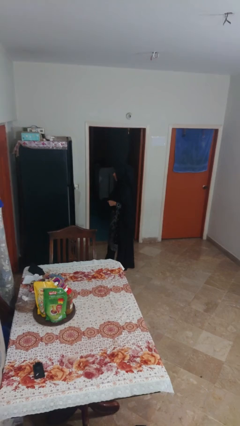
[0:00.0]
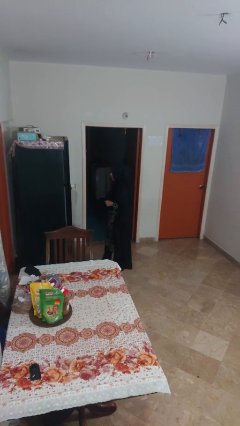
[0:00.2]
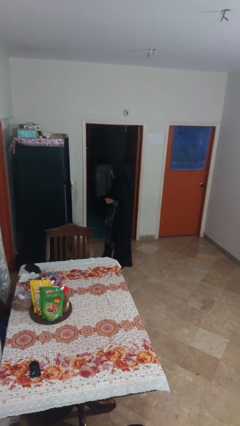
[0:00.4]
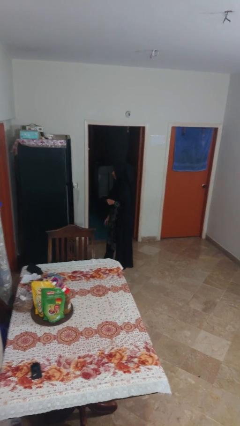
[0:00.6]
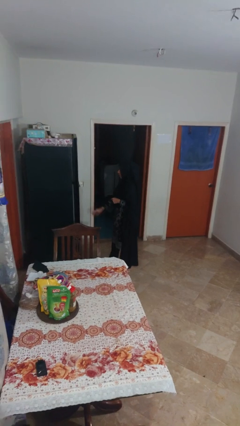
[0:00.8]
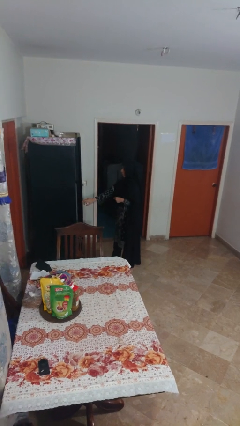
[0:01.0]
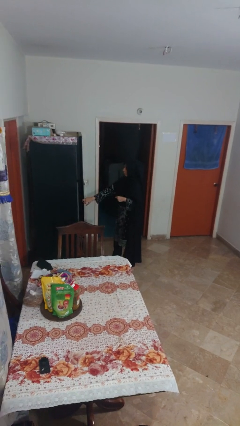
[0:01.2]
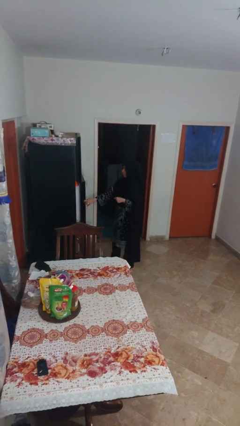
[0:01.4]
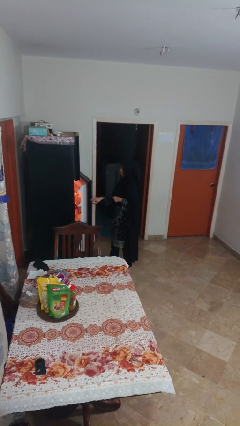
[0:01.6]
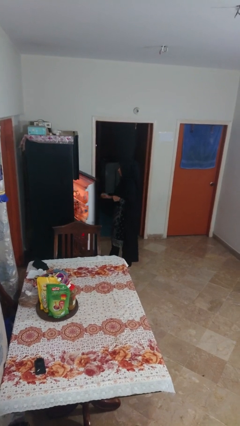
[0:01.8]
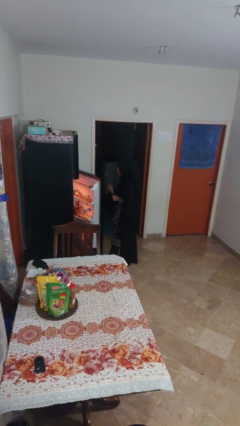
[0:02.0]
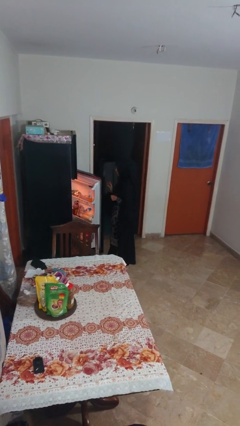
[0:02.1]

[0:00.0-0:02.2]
person opens refrigerator

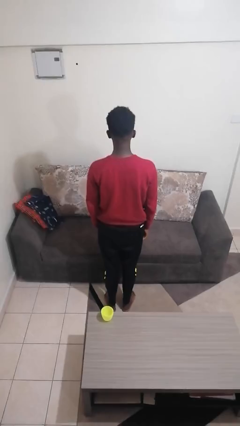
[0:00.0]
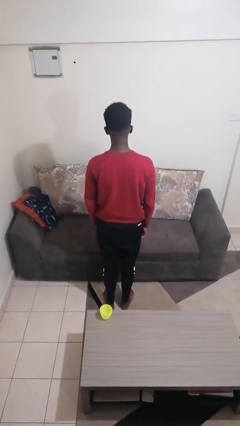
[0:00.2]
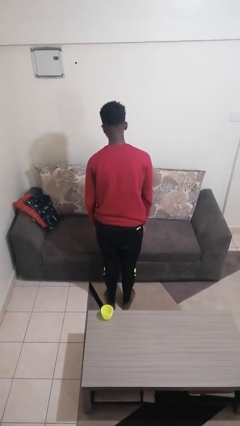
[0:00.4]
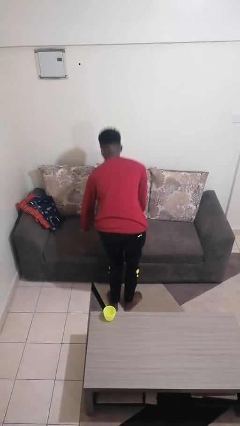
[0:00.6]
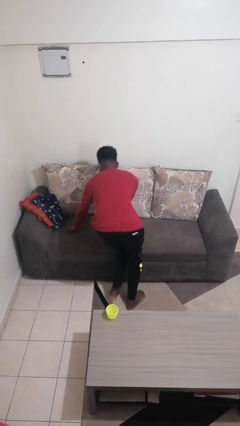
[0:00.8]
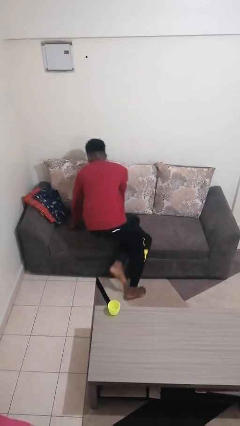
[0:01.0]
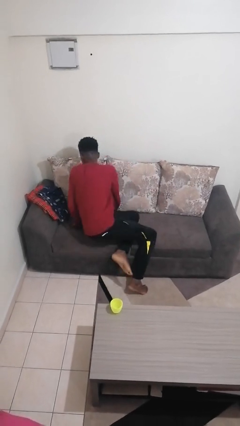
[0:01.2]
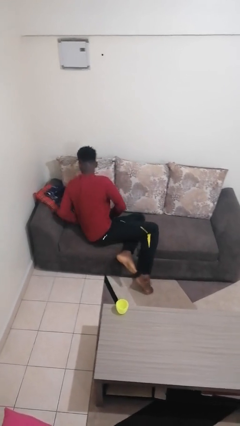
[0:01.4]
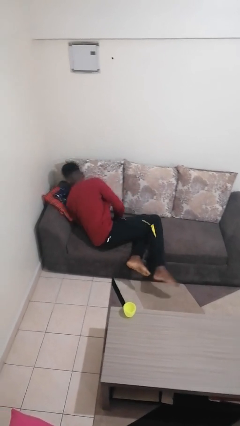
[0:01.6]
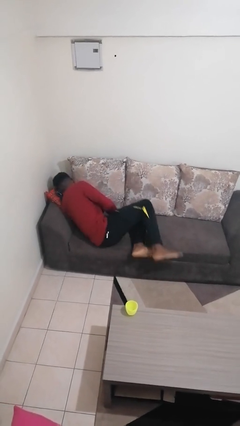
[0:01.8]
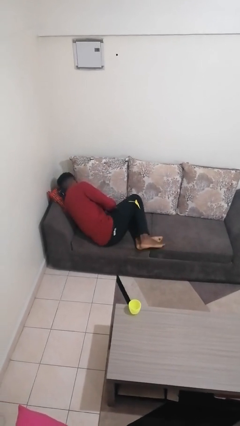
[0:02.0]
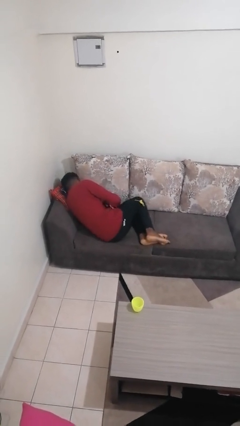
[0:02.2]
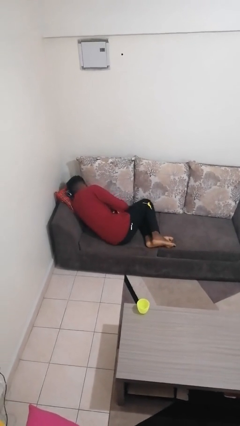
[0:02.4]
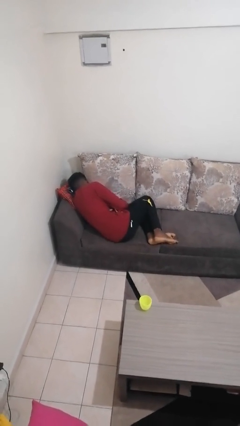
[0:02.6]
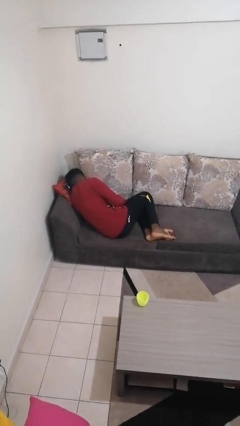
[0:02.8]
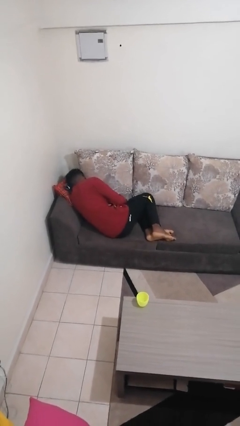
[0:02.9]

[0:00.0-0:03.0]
person lies down on couch

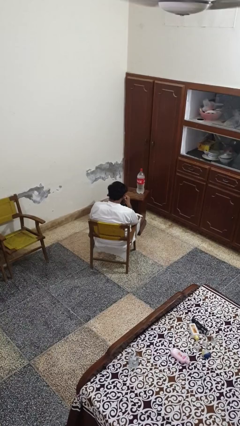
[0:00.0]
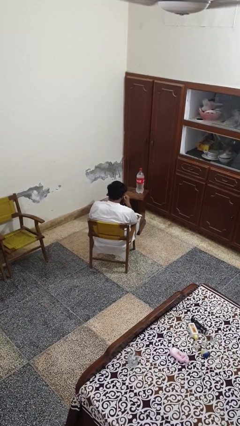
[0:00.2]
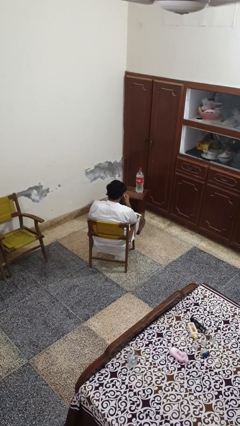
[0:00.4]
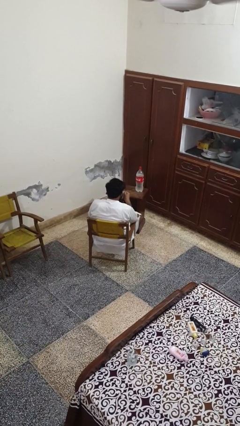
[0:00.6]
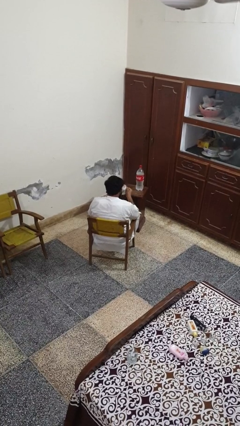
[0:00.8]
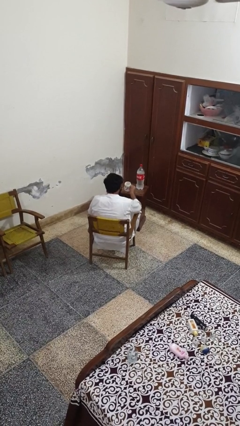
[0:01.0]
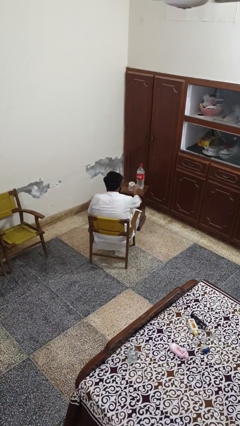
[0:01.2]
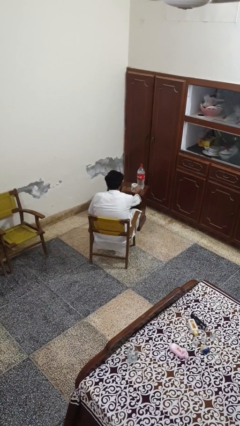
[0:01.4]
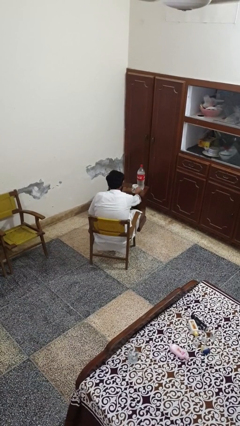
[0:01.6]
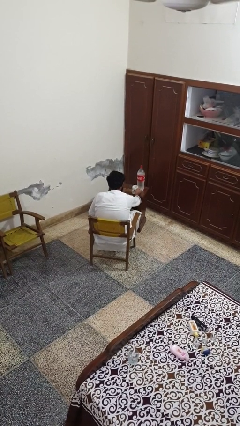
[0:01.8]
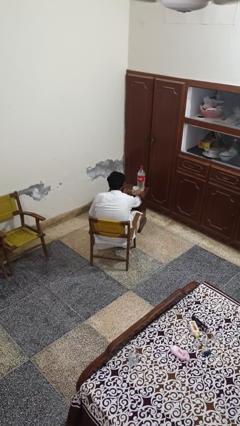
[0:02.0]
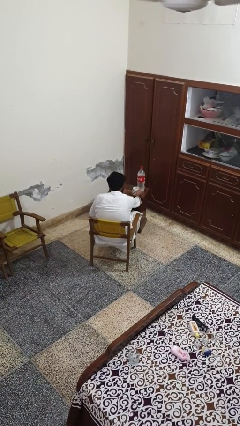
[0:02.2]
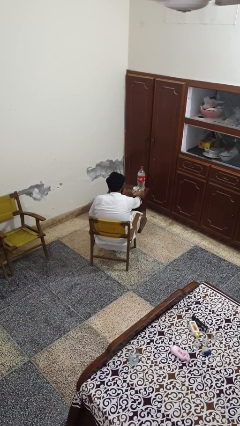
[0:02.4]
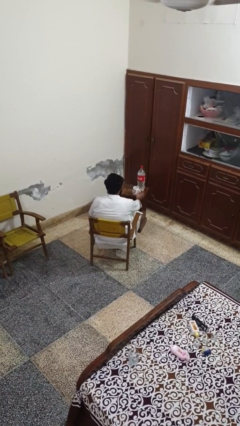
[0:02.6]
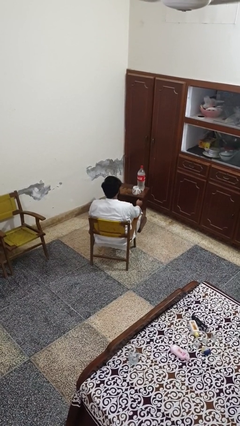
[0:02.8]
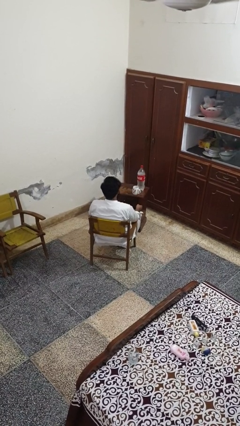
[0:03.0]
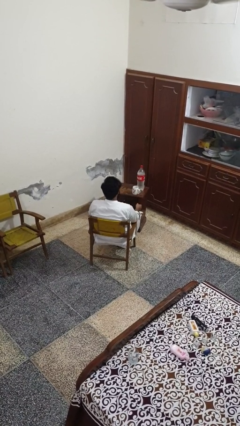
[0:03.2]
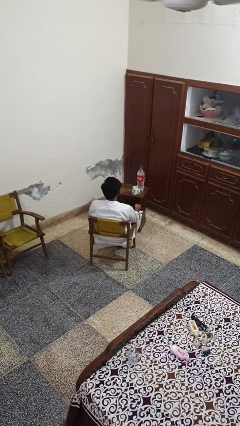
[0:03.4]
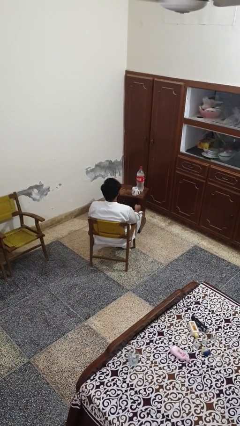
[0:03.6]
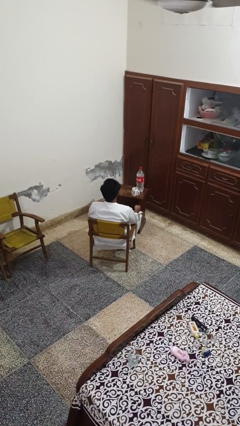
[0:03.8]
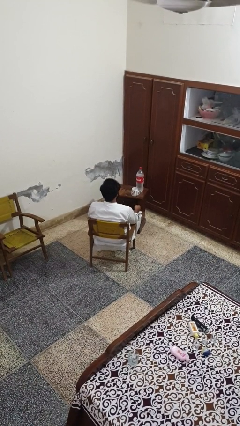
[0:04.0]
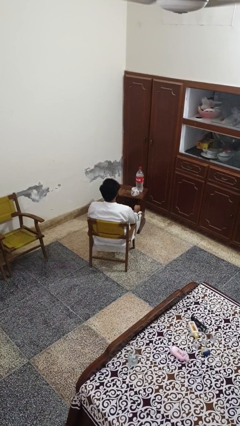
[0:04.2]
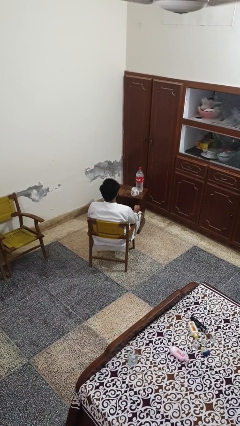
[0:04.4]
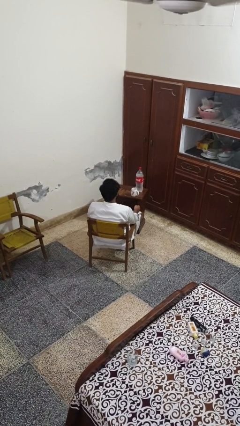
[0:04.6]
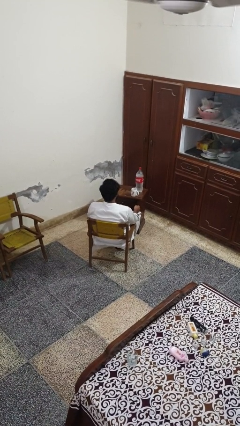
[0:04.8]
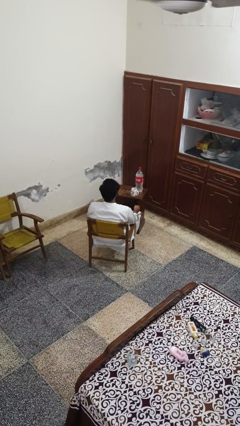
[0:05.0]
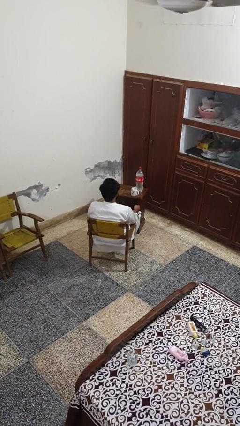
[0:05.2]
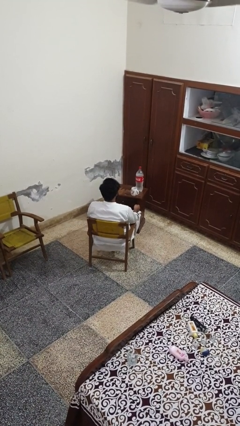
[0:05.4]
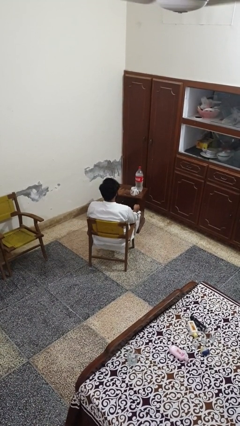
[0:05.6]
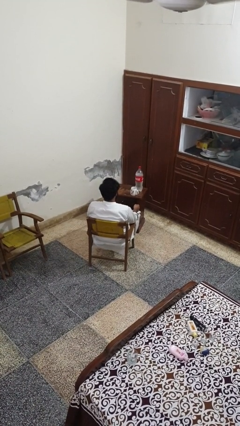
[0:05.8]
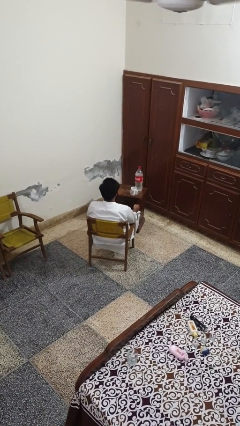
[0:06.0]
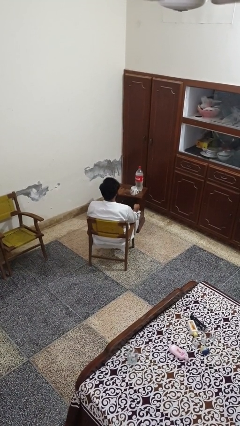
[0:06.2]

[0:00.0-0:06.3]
person puts down object on table

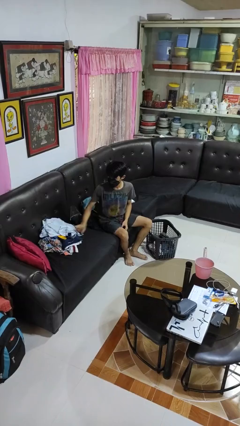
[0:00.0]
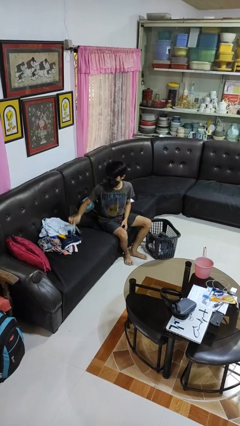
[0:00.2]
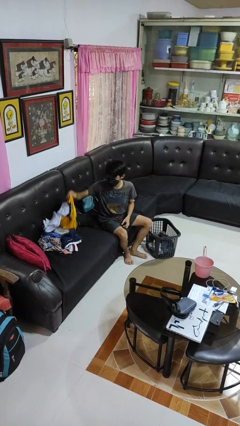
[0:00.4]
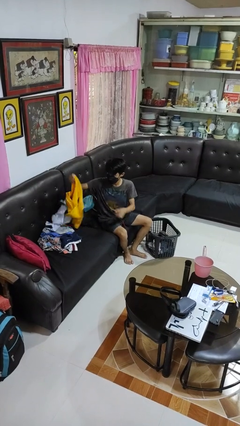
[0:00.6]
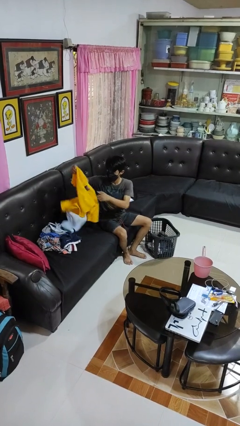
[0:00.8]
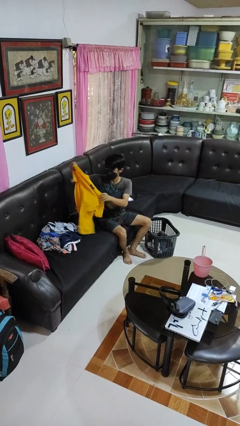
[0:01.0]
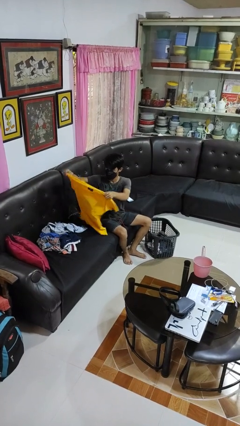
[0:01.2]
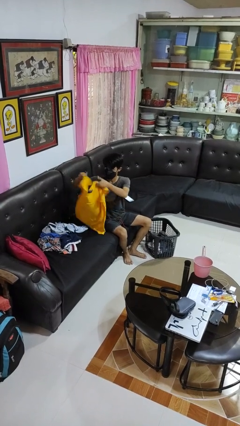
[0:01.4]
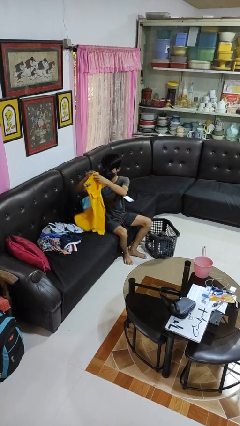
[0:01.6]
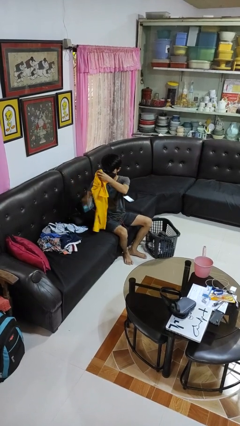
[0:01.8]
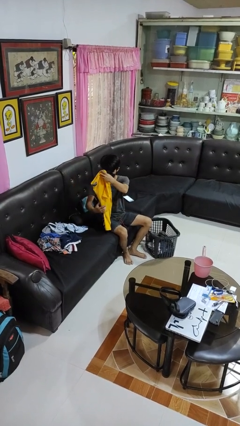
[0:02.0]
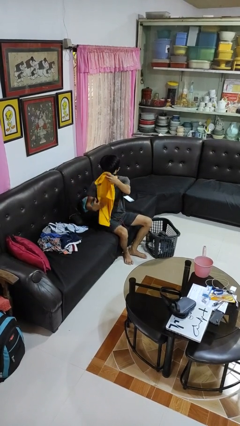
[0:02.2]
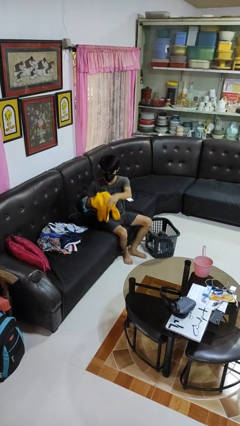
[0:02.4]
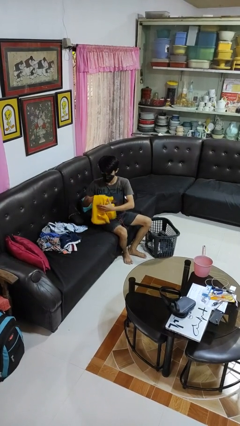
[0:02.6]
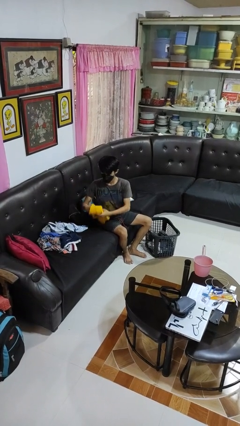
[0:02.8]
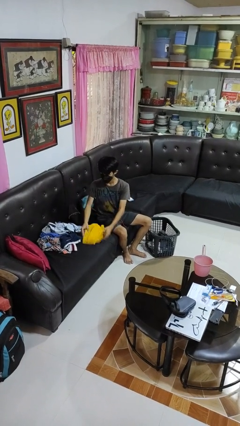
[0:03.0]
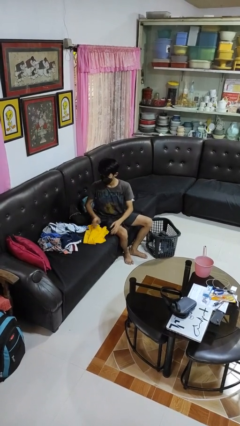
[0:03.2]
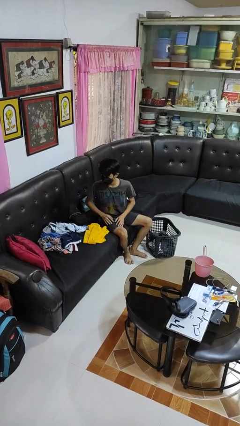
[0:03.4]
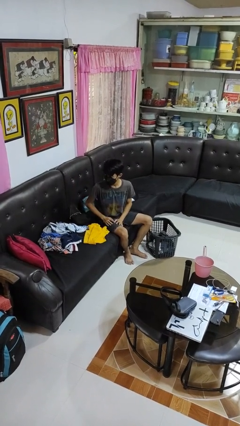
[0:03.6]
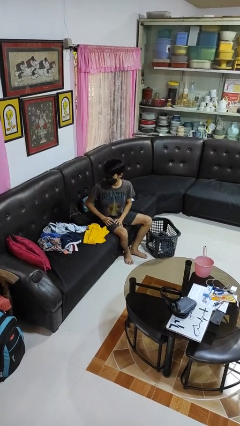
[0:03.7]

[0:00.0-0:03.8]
person folds shirt

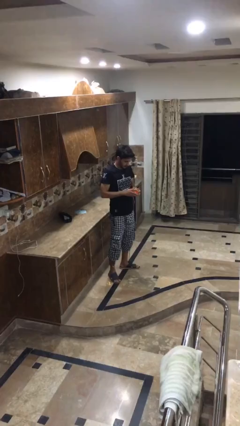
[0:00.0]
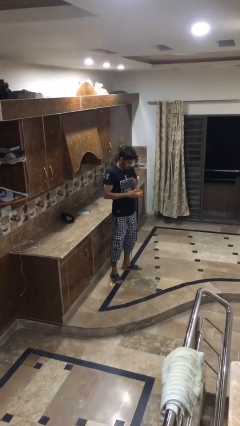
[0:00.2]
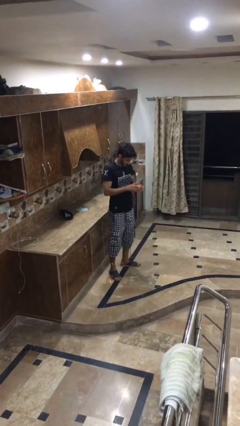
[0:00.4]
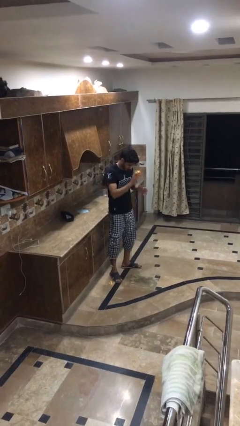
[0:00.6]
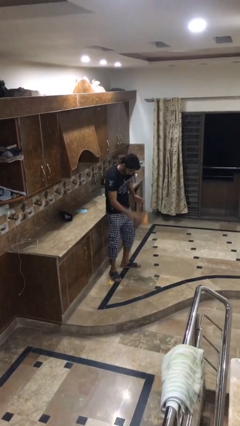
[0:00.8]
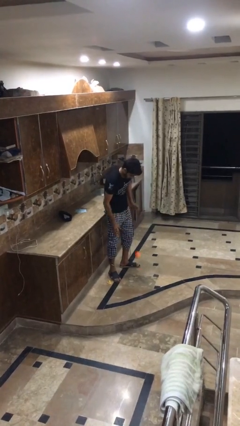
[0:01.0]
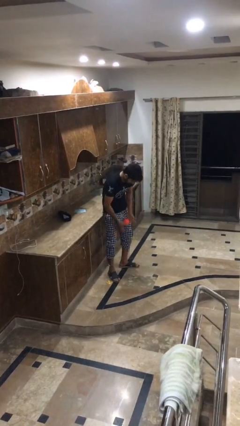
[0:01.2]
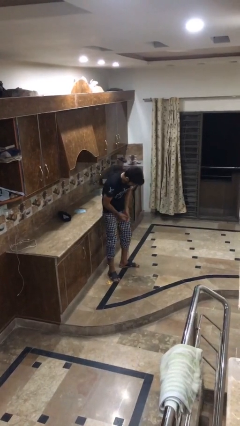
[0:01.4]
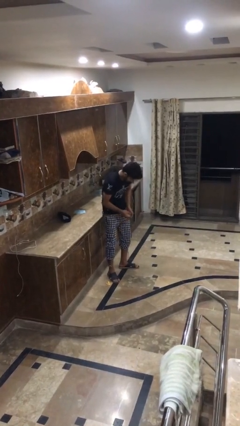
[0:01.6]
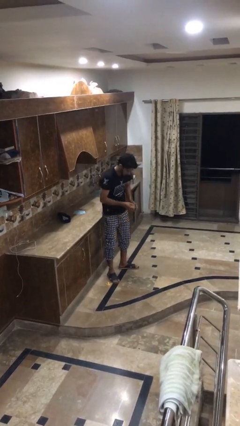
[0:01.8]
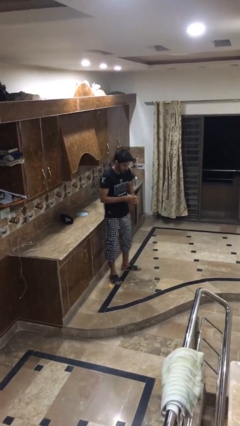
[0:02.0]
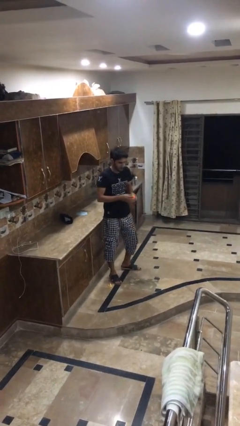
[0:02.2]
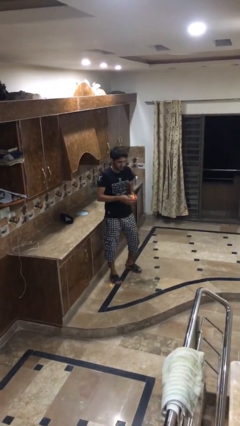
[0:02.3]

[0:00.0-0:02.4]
person bounces ball on floor
